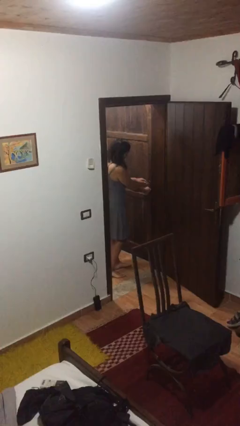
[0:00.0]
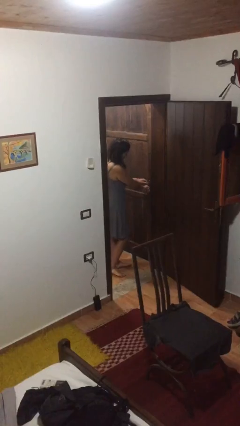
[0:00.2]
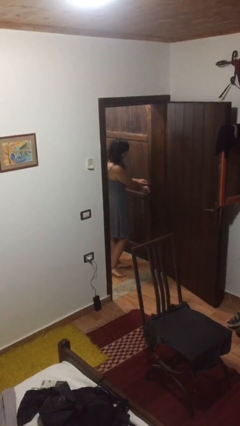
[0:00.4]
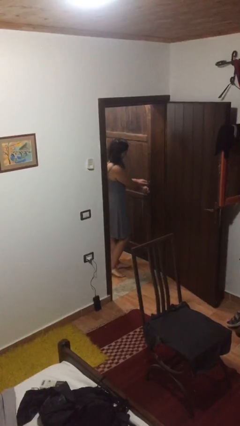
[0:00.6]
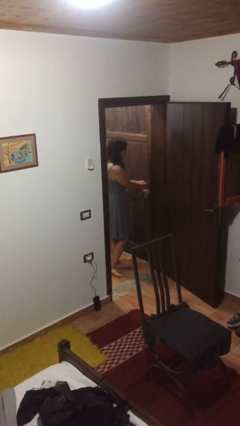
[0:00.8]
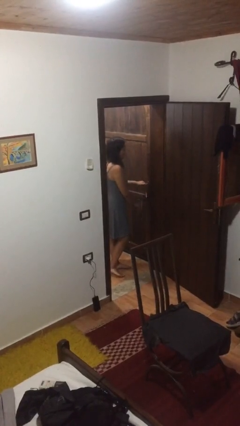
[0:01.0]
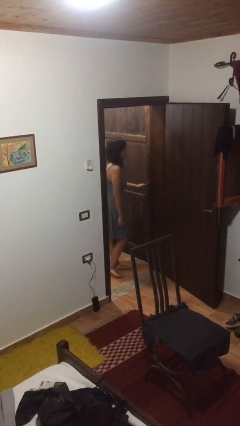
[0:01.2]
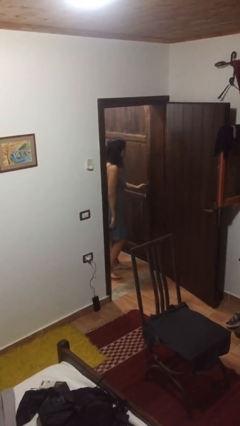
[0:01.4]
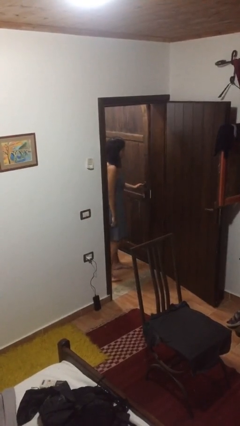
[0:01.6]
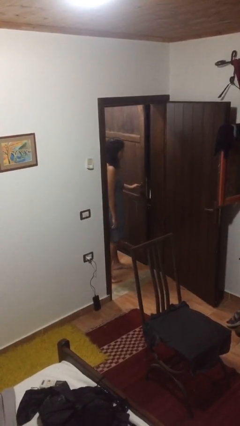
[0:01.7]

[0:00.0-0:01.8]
person unlocks door with keys

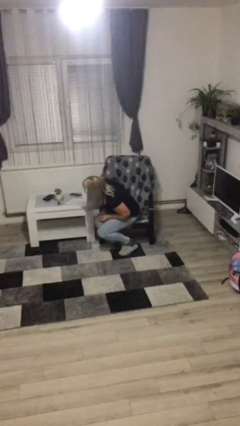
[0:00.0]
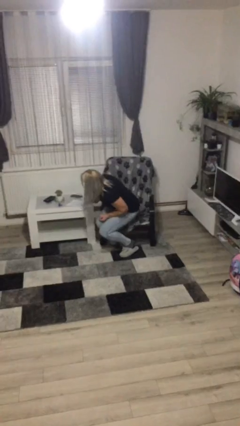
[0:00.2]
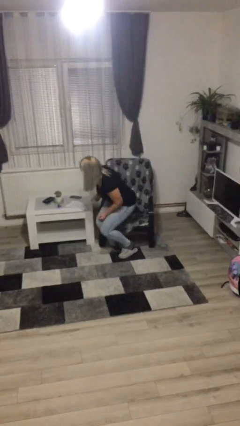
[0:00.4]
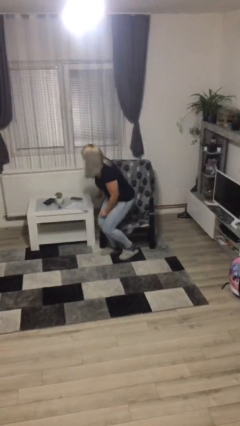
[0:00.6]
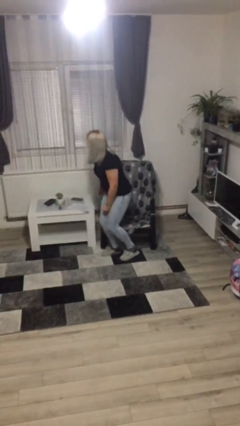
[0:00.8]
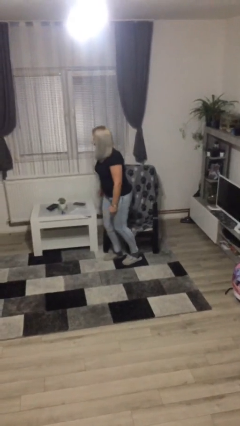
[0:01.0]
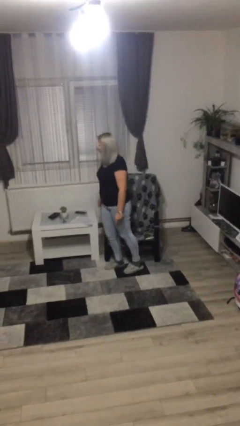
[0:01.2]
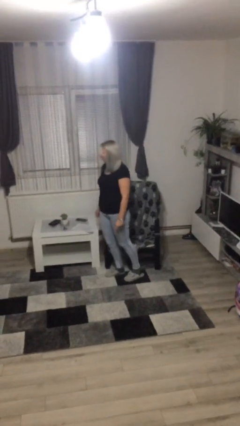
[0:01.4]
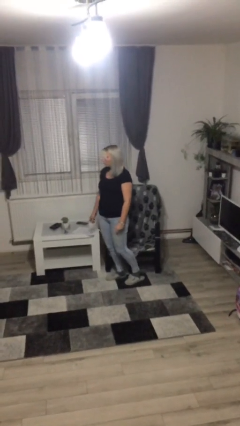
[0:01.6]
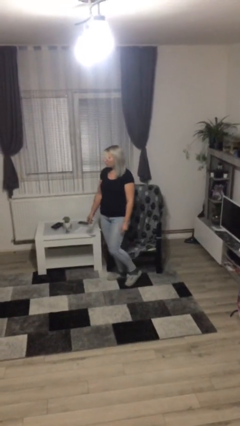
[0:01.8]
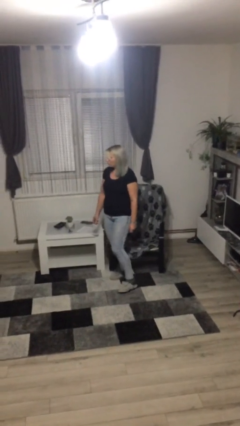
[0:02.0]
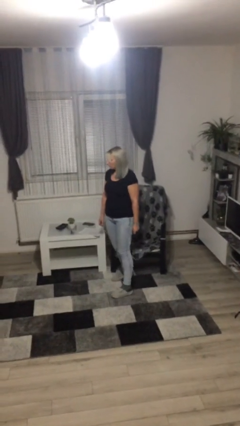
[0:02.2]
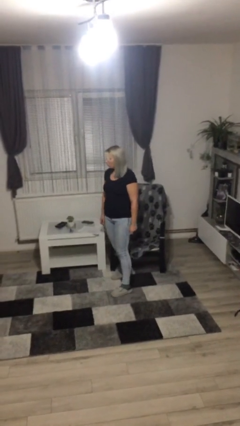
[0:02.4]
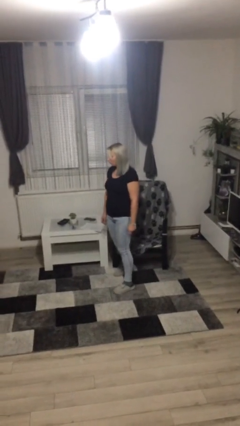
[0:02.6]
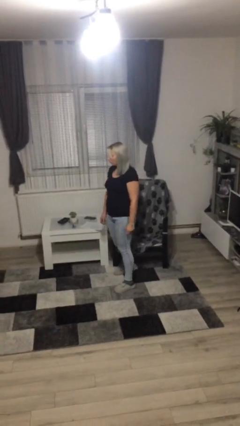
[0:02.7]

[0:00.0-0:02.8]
person stands up

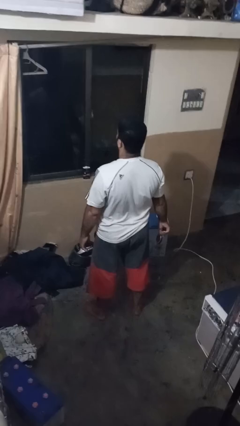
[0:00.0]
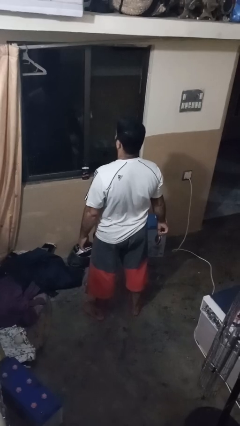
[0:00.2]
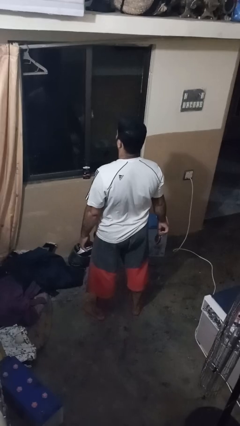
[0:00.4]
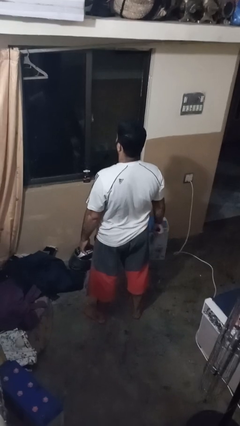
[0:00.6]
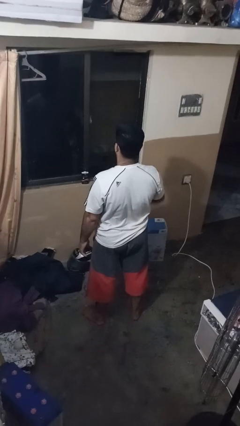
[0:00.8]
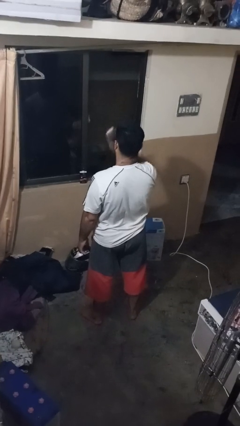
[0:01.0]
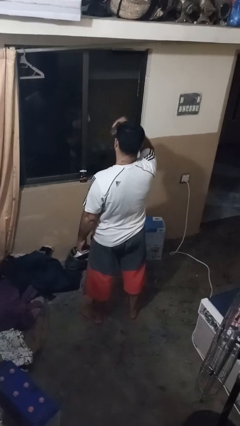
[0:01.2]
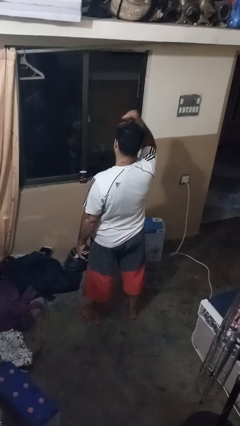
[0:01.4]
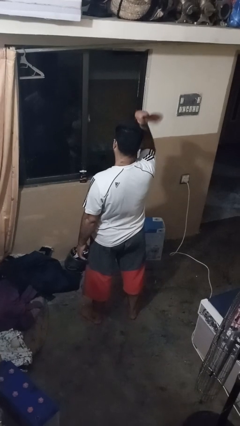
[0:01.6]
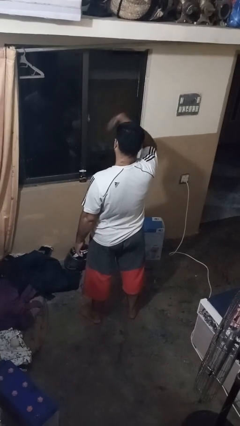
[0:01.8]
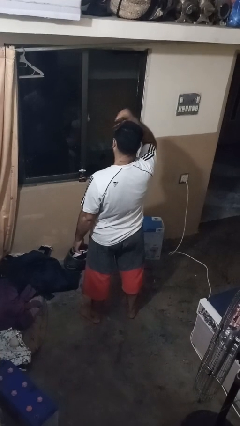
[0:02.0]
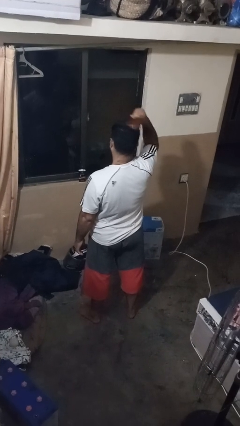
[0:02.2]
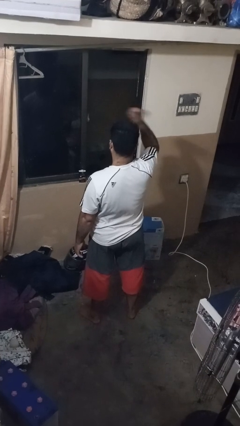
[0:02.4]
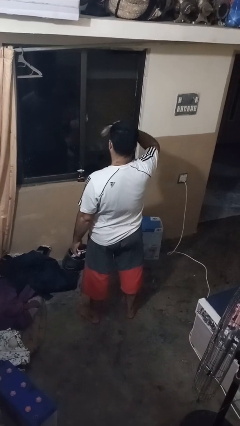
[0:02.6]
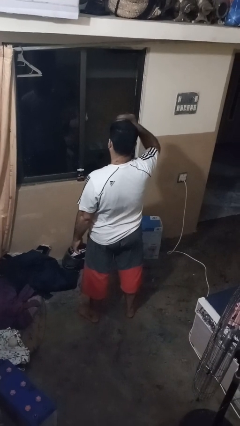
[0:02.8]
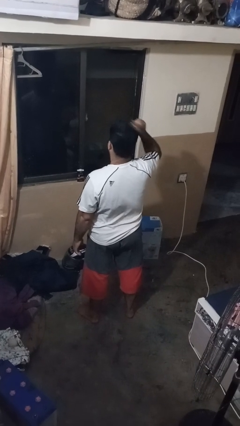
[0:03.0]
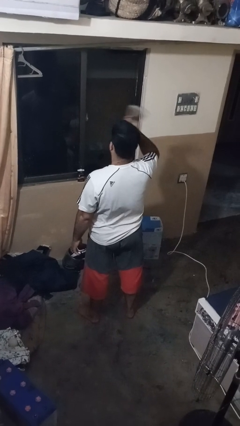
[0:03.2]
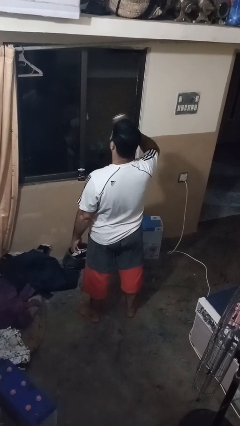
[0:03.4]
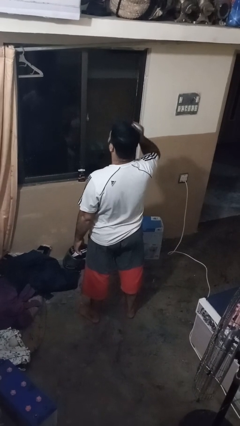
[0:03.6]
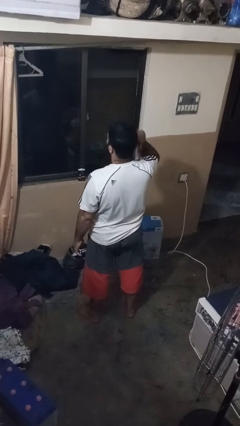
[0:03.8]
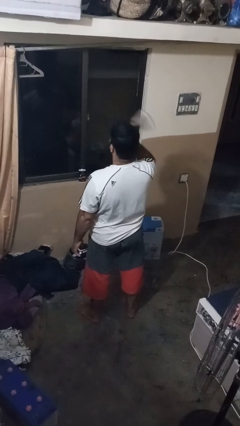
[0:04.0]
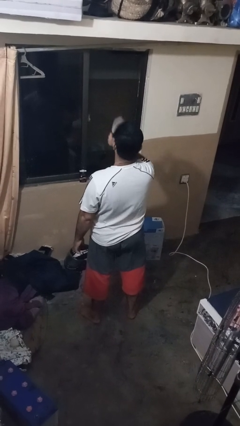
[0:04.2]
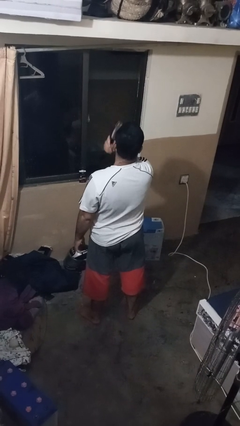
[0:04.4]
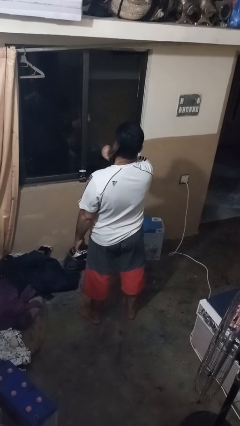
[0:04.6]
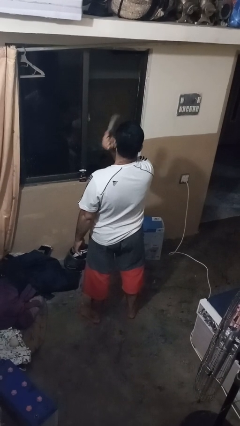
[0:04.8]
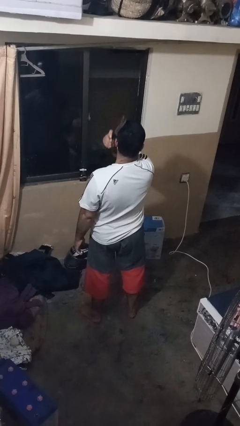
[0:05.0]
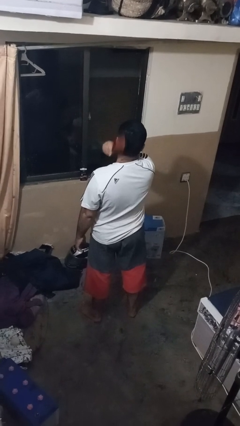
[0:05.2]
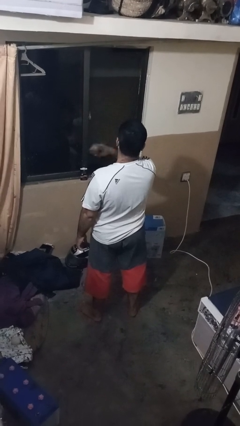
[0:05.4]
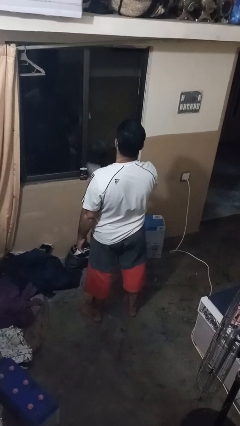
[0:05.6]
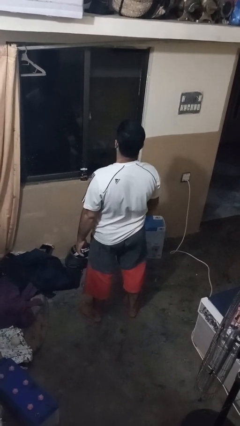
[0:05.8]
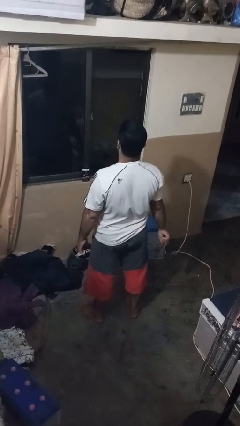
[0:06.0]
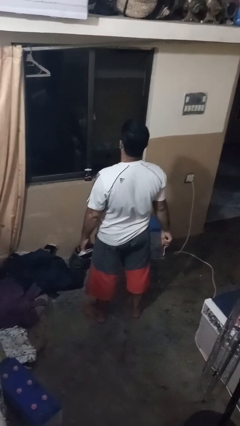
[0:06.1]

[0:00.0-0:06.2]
person brushes hair

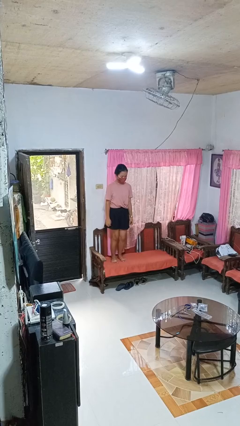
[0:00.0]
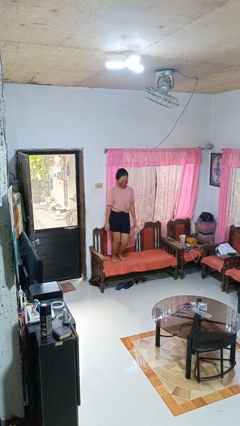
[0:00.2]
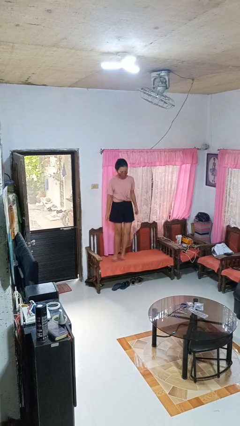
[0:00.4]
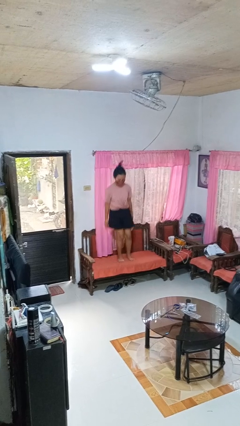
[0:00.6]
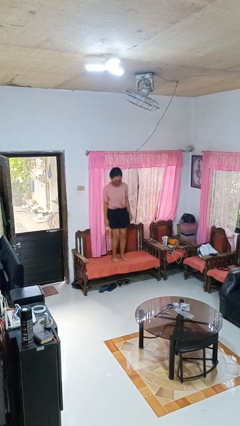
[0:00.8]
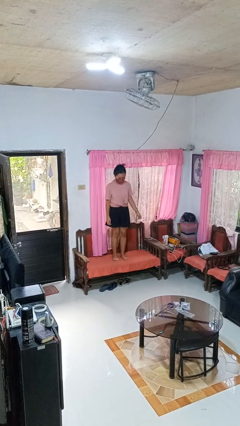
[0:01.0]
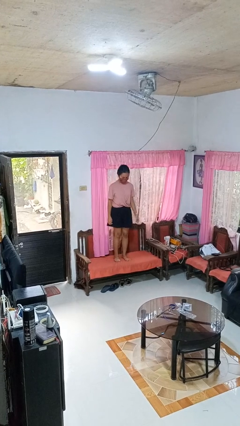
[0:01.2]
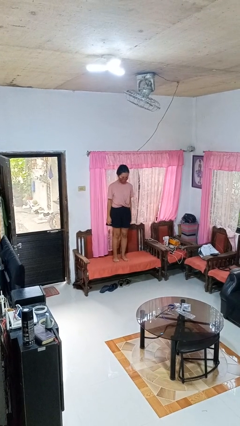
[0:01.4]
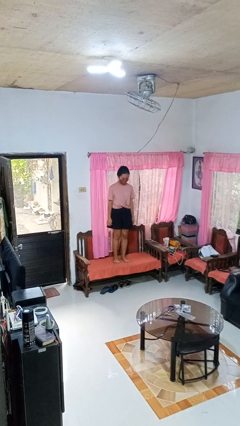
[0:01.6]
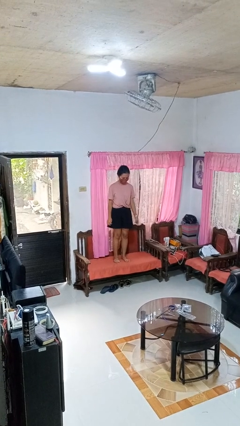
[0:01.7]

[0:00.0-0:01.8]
person jumps on couch

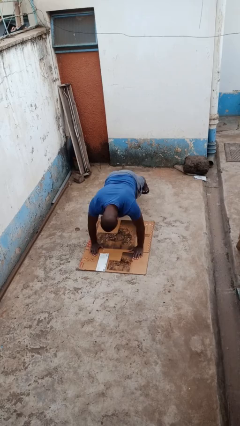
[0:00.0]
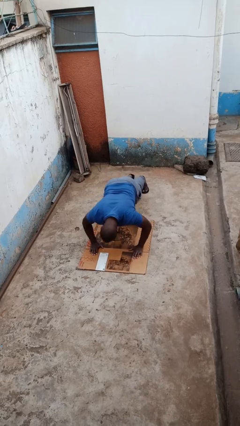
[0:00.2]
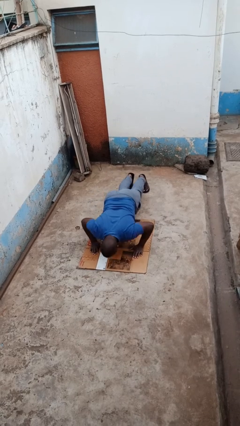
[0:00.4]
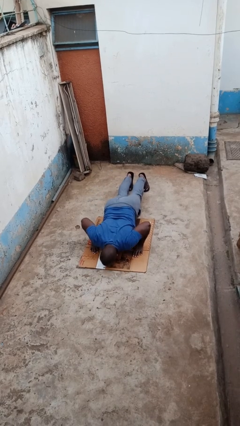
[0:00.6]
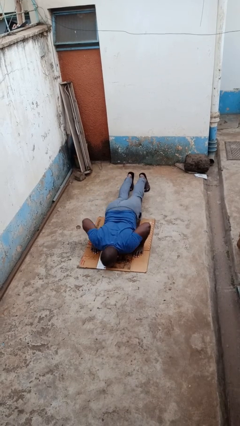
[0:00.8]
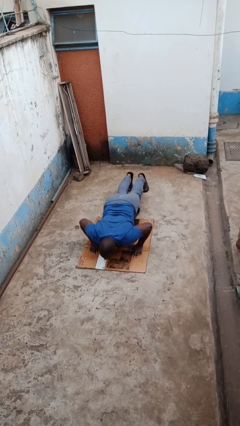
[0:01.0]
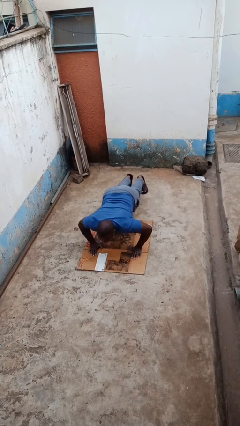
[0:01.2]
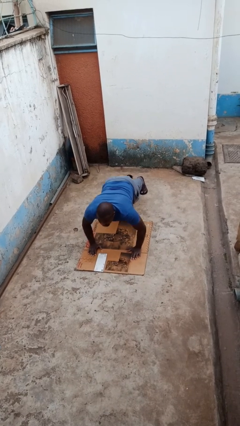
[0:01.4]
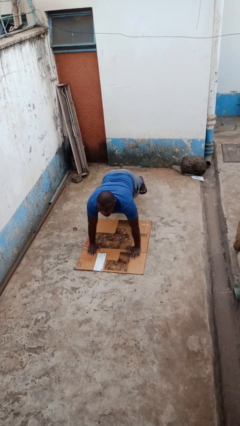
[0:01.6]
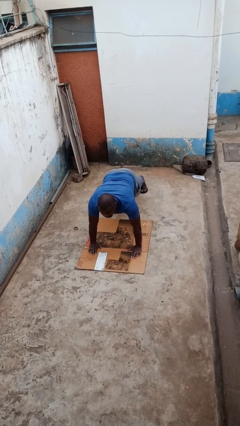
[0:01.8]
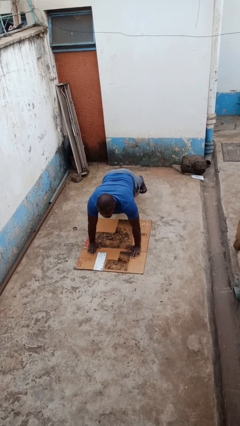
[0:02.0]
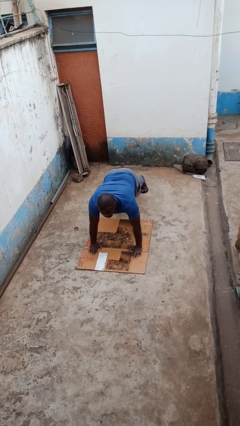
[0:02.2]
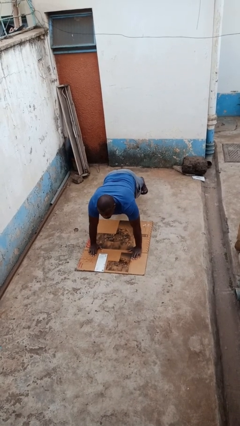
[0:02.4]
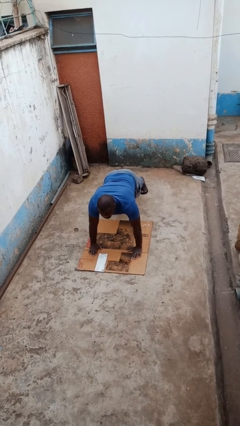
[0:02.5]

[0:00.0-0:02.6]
person exercises with pushup

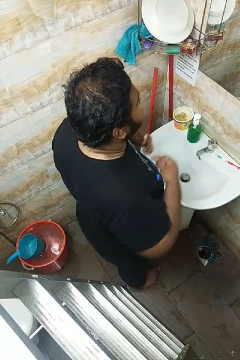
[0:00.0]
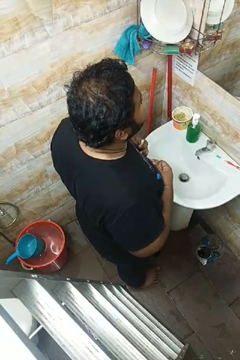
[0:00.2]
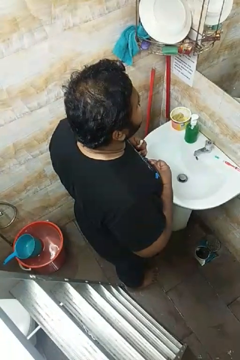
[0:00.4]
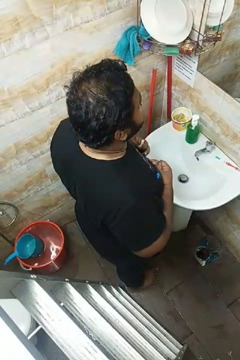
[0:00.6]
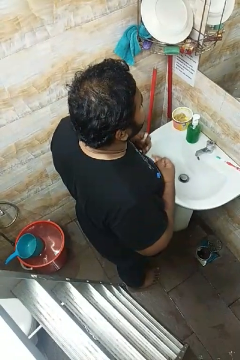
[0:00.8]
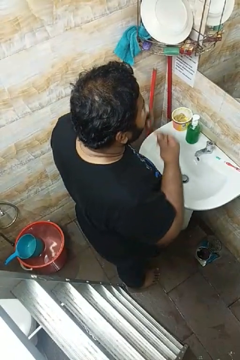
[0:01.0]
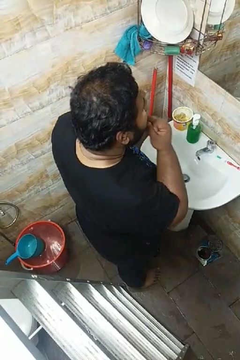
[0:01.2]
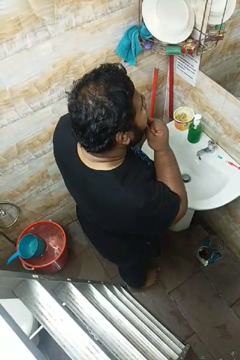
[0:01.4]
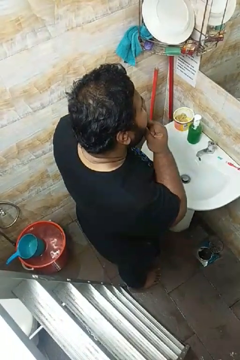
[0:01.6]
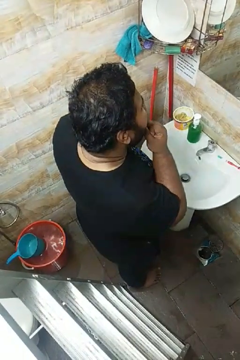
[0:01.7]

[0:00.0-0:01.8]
person flosses

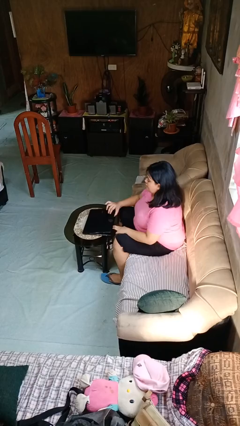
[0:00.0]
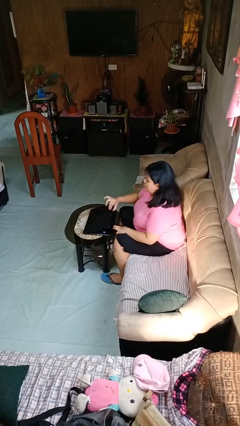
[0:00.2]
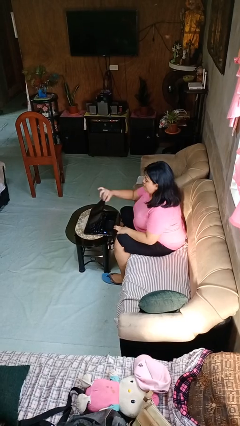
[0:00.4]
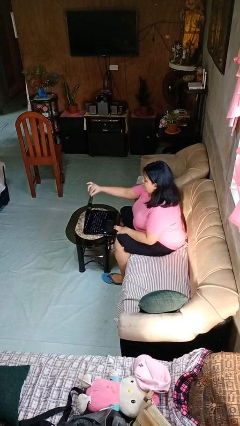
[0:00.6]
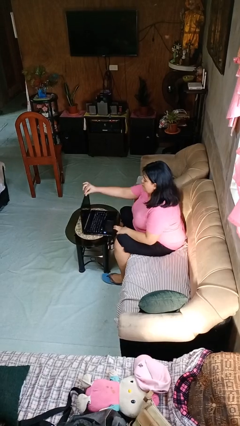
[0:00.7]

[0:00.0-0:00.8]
person opens laptop
